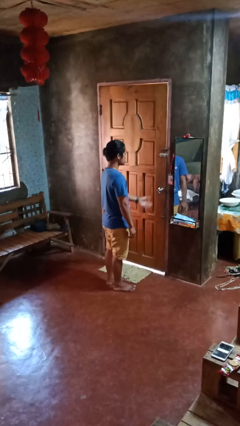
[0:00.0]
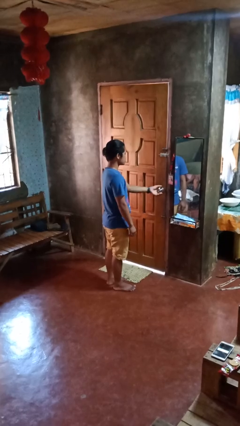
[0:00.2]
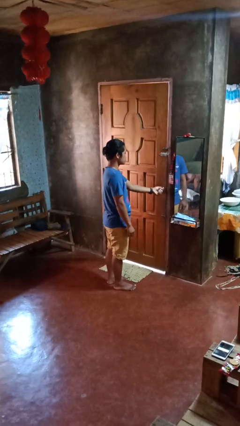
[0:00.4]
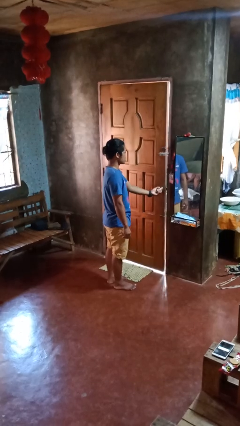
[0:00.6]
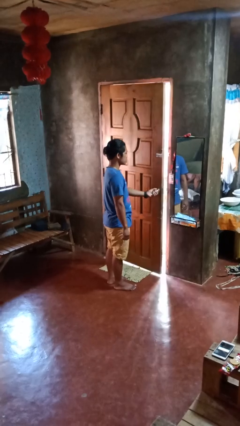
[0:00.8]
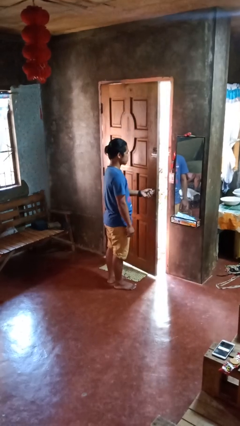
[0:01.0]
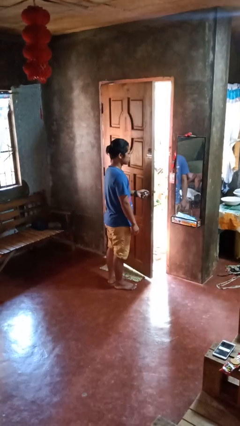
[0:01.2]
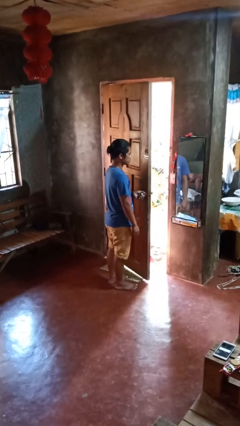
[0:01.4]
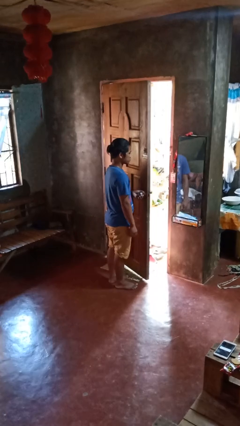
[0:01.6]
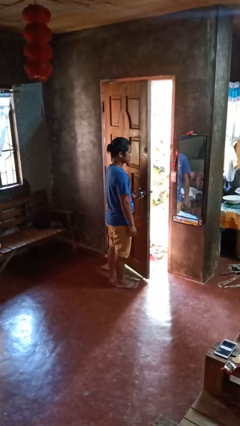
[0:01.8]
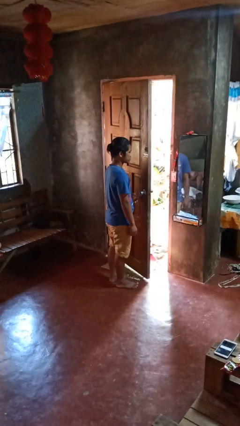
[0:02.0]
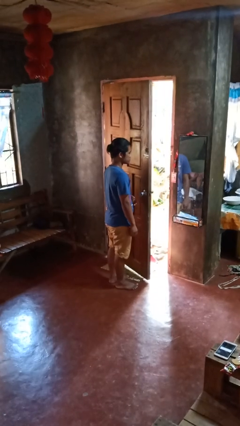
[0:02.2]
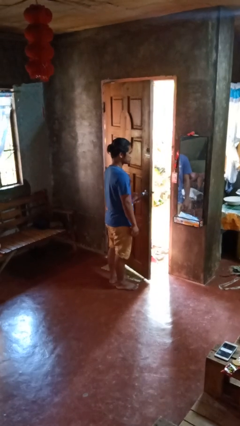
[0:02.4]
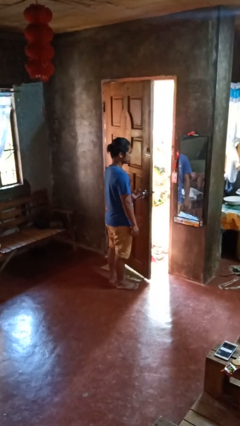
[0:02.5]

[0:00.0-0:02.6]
person opens facility door

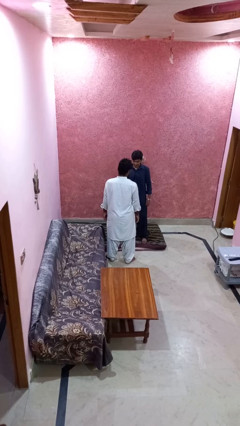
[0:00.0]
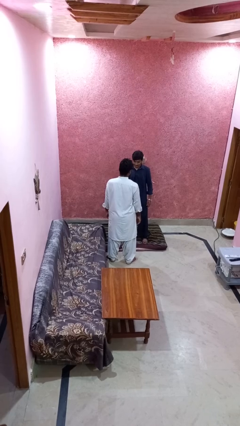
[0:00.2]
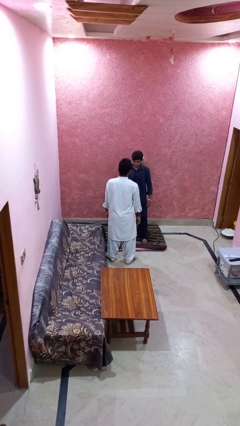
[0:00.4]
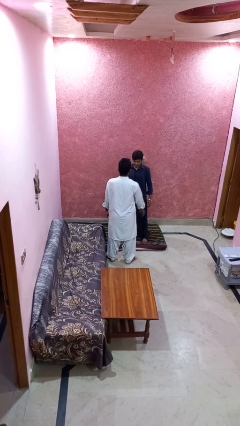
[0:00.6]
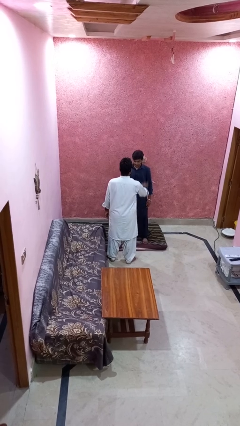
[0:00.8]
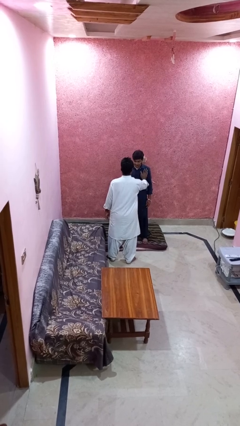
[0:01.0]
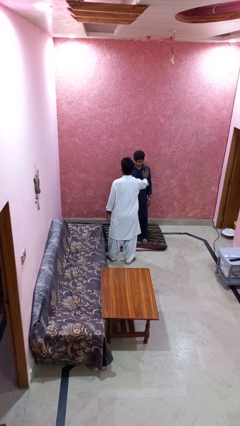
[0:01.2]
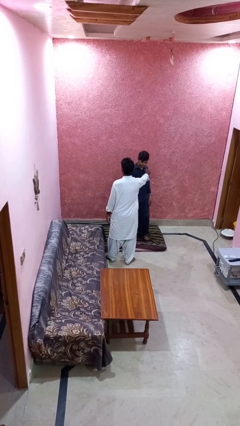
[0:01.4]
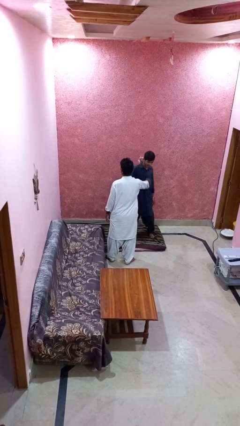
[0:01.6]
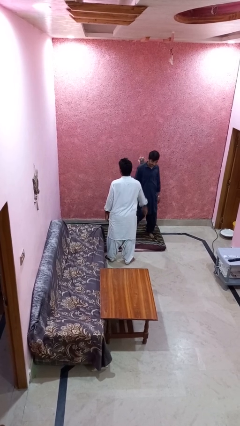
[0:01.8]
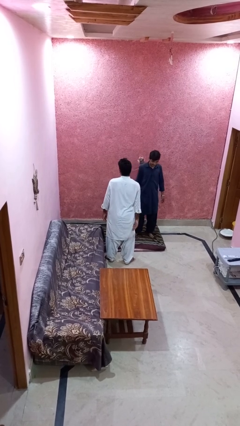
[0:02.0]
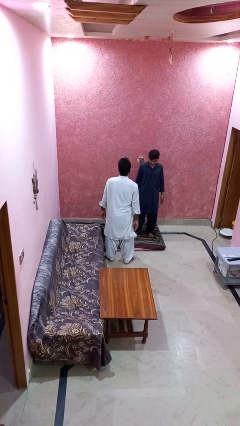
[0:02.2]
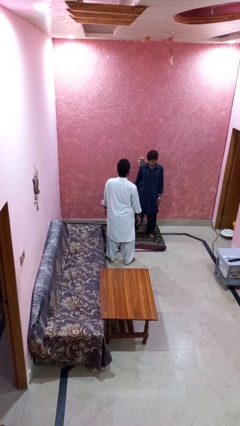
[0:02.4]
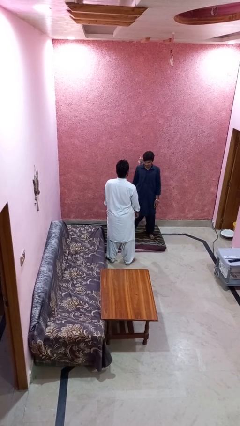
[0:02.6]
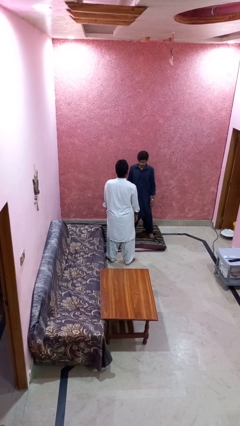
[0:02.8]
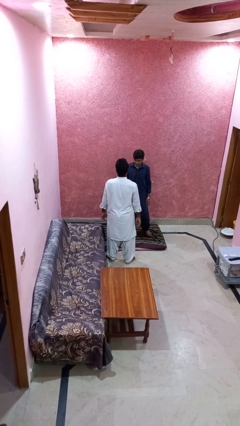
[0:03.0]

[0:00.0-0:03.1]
person shoves person

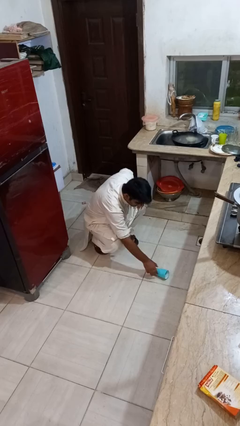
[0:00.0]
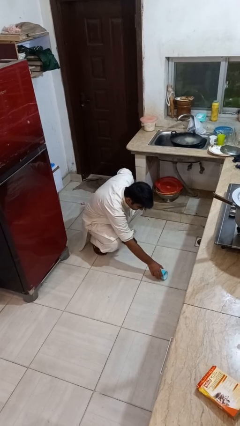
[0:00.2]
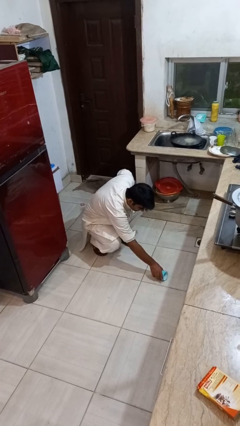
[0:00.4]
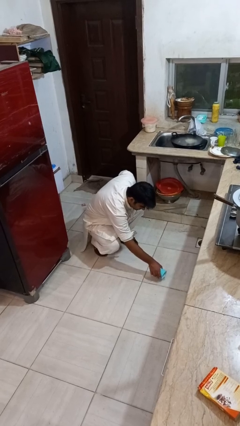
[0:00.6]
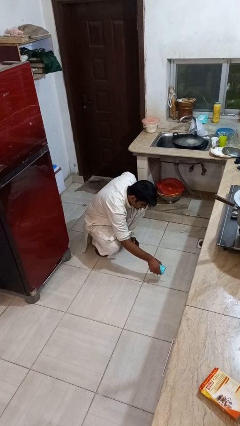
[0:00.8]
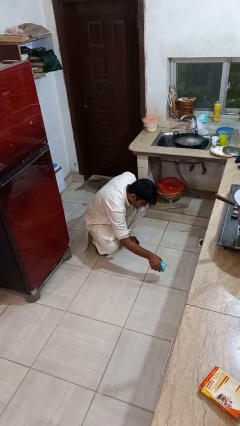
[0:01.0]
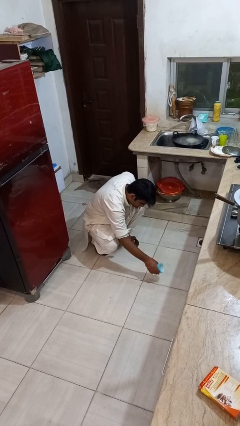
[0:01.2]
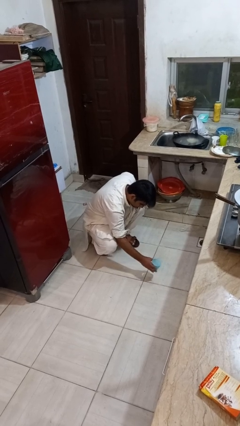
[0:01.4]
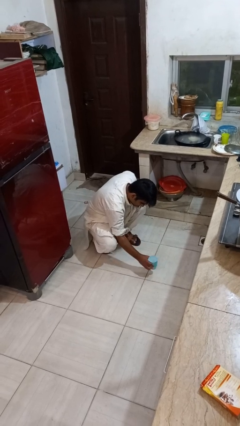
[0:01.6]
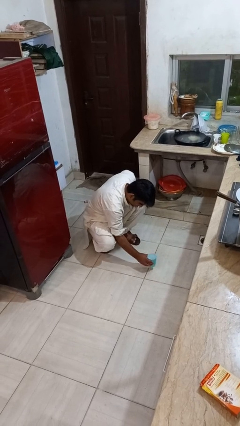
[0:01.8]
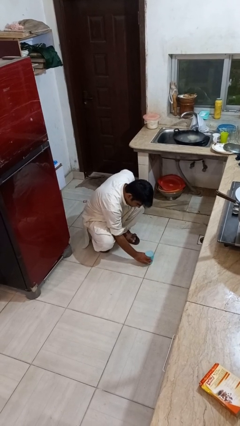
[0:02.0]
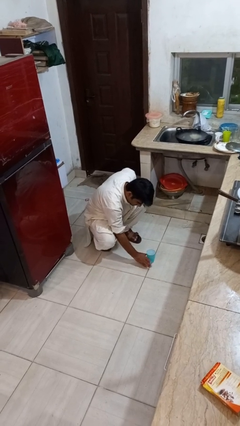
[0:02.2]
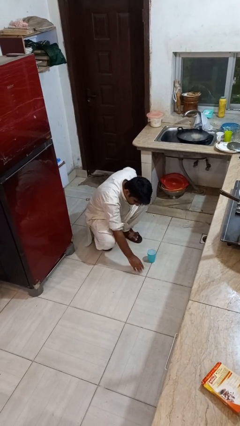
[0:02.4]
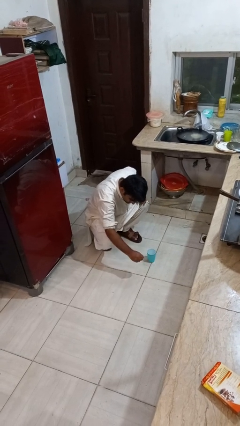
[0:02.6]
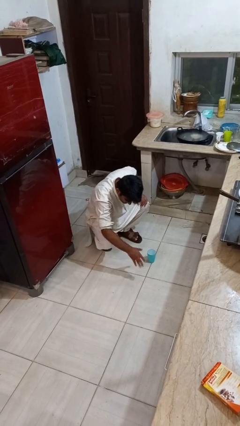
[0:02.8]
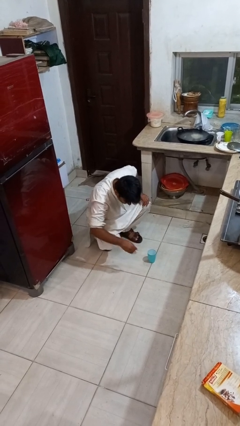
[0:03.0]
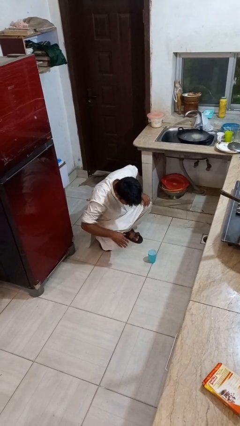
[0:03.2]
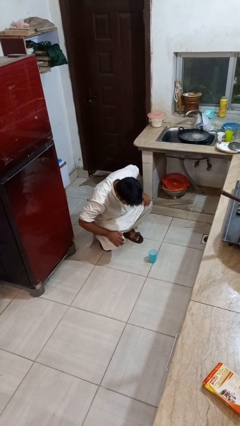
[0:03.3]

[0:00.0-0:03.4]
person sets upright glass

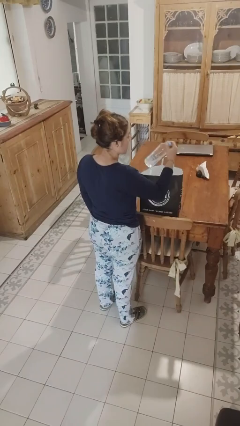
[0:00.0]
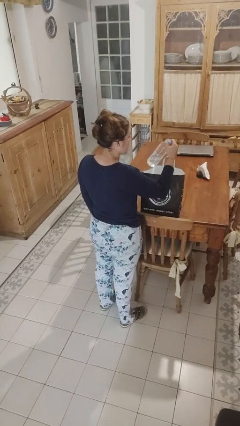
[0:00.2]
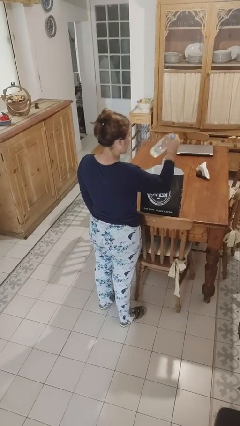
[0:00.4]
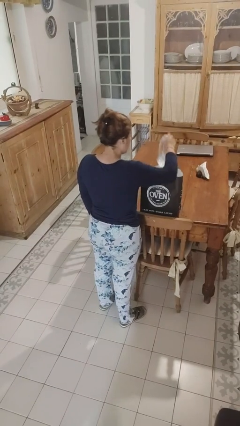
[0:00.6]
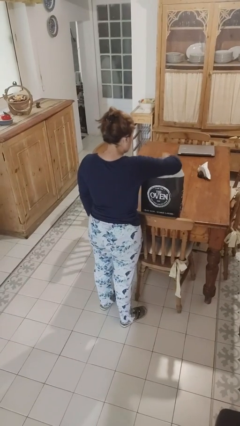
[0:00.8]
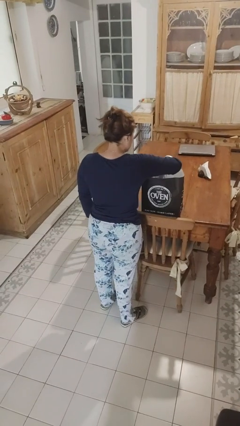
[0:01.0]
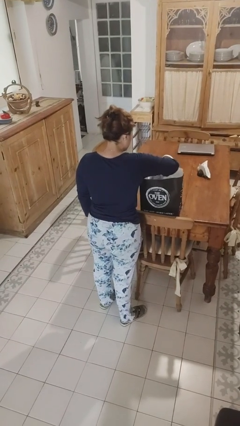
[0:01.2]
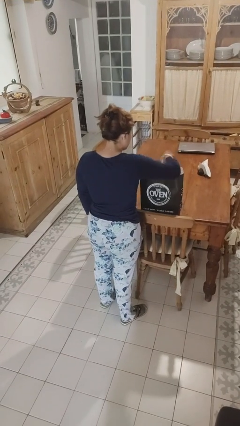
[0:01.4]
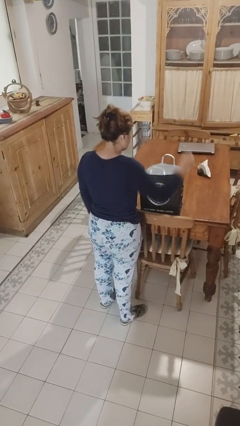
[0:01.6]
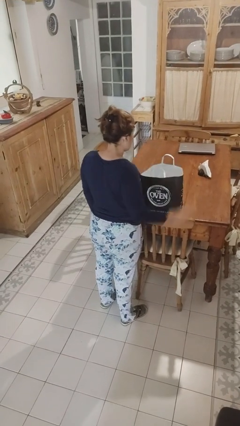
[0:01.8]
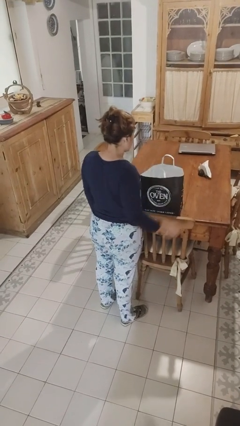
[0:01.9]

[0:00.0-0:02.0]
person puts object into bag

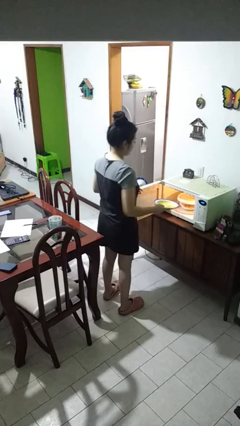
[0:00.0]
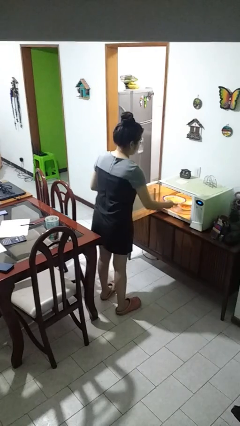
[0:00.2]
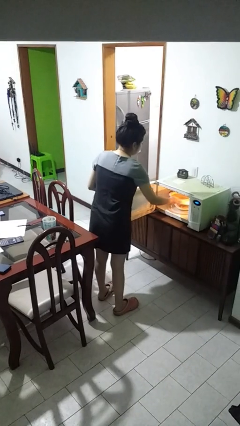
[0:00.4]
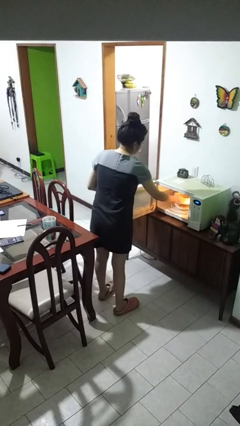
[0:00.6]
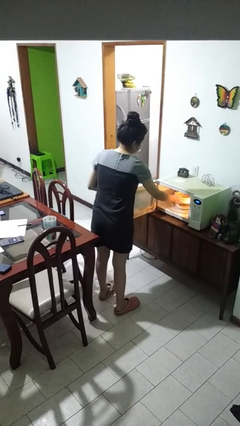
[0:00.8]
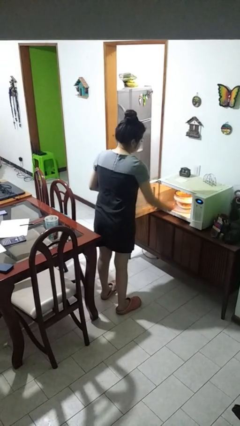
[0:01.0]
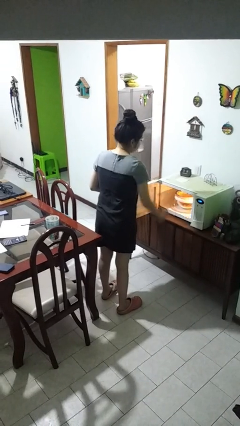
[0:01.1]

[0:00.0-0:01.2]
person puts object into microwave

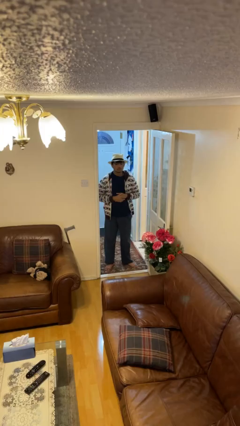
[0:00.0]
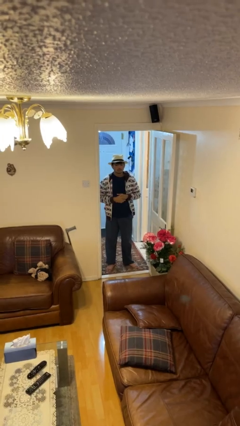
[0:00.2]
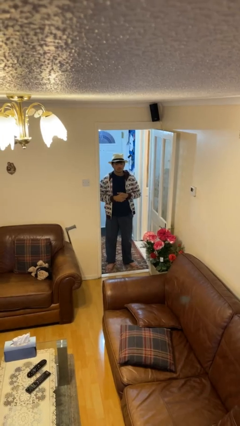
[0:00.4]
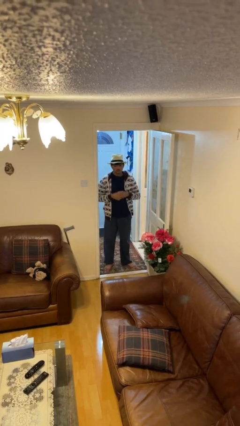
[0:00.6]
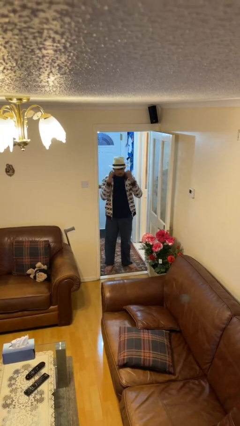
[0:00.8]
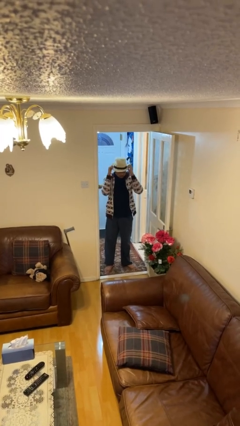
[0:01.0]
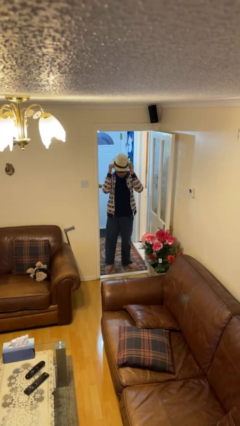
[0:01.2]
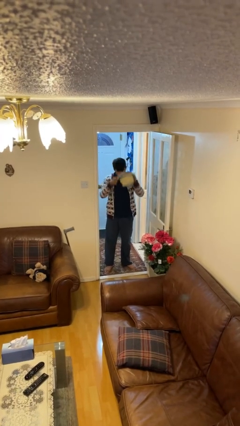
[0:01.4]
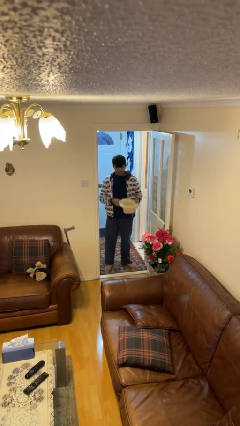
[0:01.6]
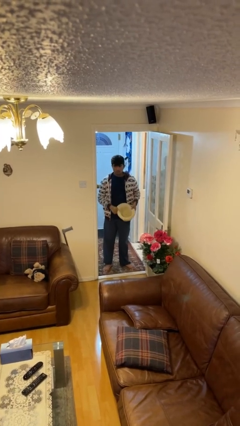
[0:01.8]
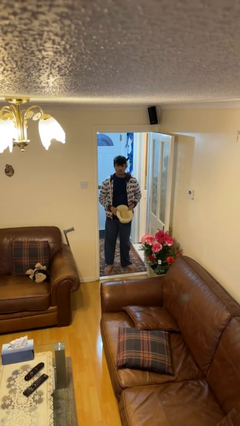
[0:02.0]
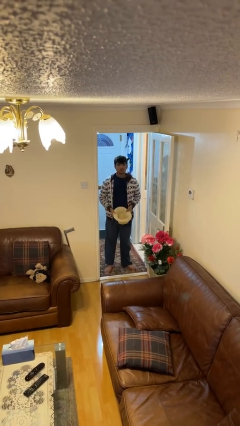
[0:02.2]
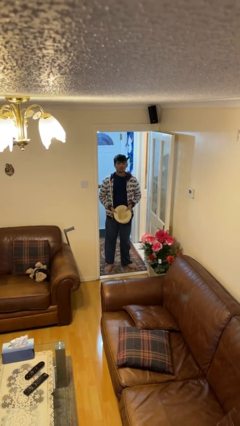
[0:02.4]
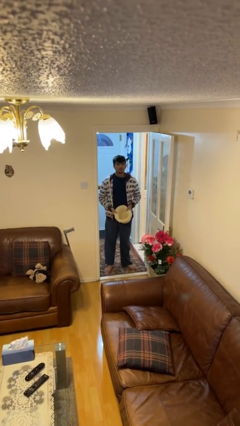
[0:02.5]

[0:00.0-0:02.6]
person takes off hat

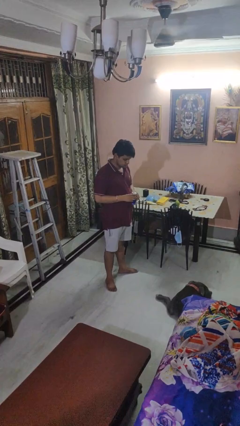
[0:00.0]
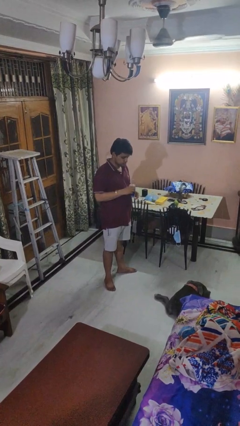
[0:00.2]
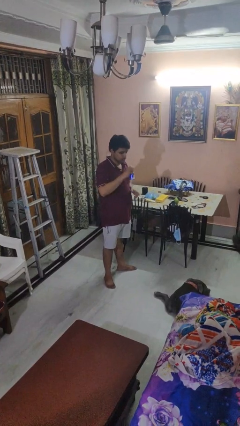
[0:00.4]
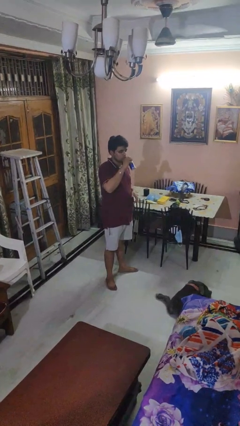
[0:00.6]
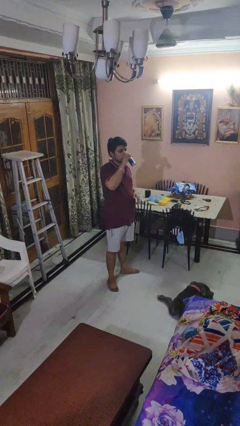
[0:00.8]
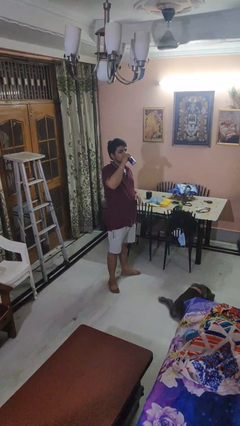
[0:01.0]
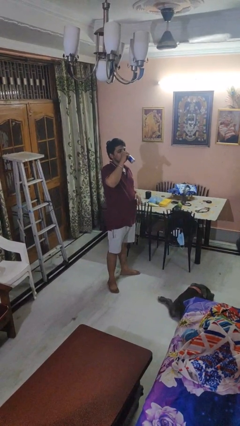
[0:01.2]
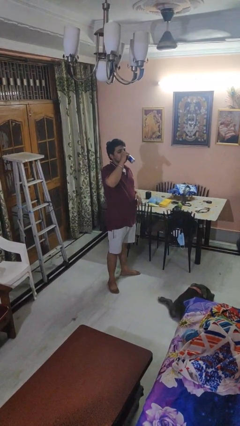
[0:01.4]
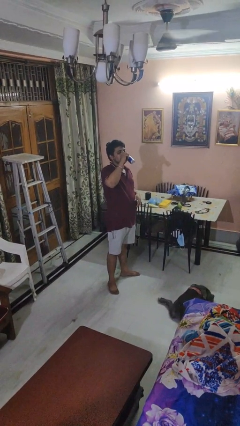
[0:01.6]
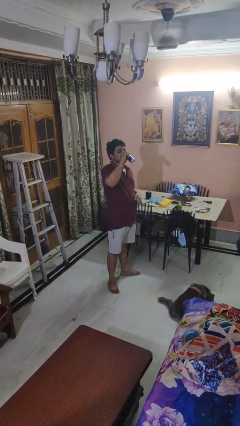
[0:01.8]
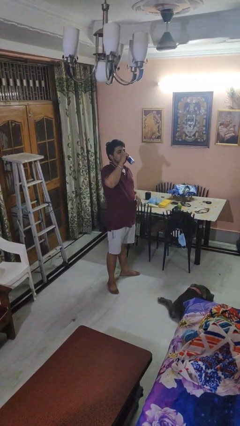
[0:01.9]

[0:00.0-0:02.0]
person drinks from beverage can

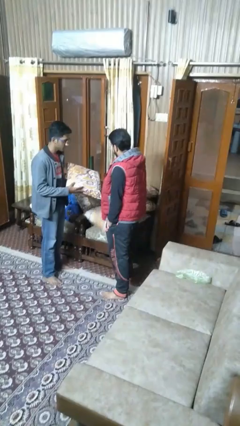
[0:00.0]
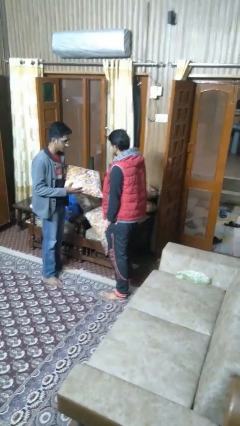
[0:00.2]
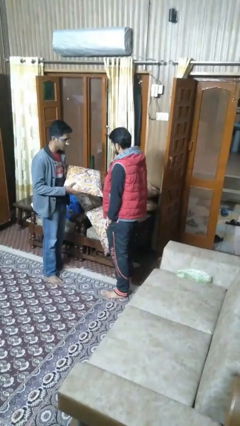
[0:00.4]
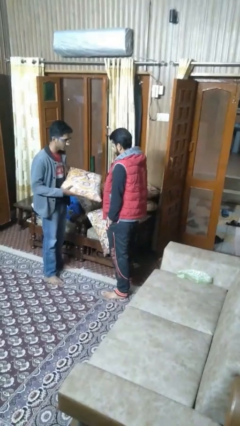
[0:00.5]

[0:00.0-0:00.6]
person transfers object to person
